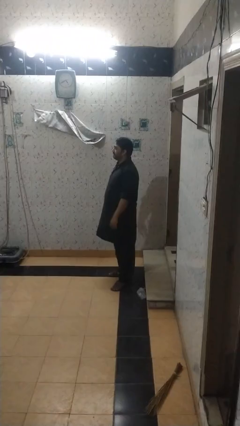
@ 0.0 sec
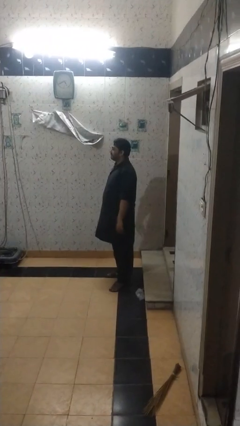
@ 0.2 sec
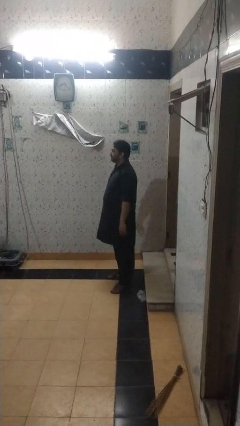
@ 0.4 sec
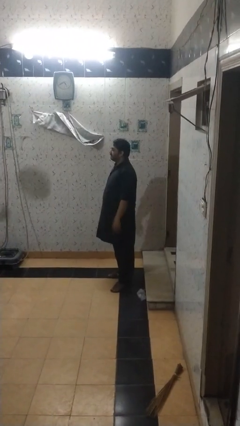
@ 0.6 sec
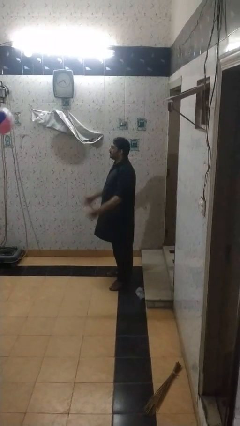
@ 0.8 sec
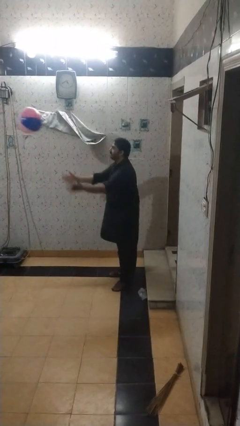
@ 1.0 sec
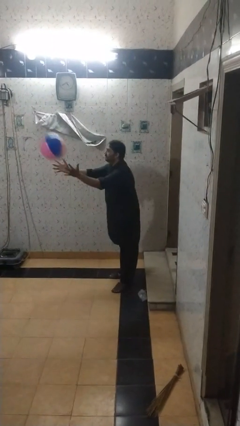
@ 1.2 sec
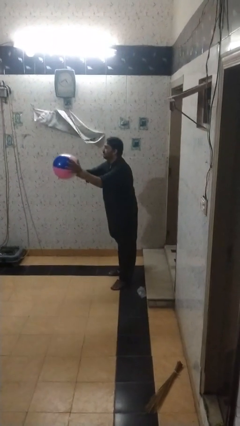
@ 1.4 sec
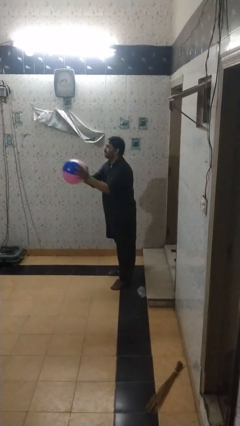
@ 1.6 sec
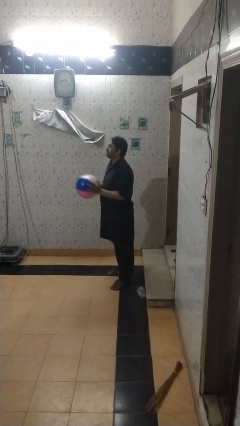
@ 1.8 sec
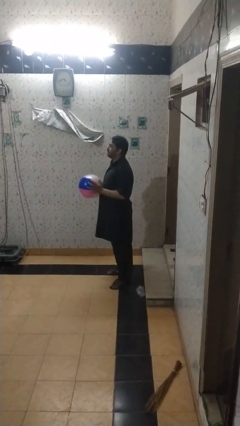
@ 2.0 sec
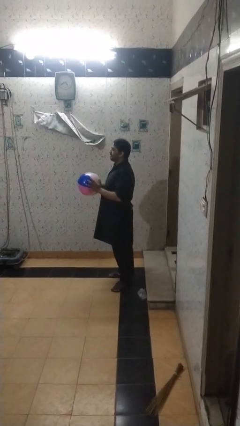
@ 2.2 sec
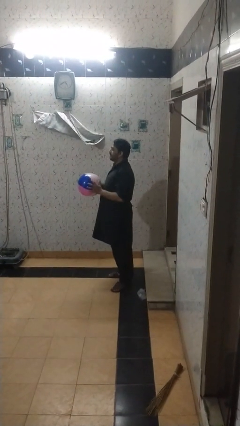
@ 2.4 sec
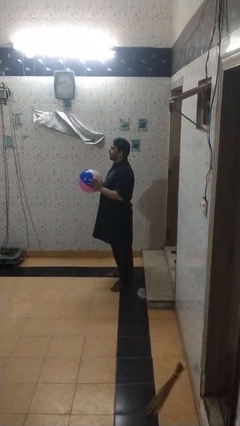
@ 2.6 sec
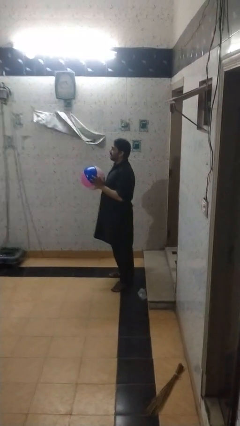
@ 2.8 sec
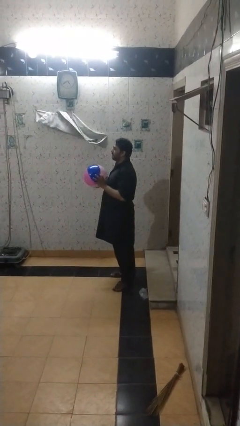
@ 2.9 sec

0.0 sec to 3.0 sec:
person catches object from person

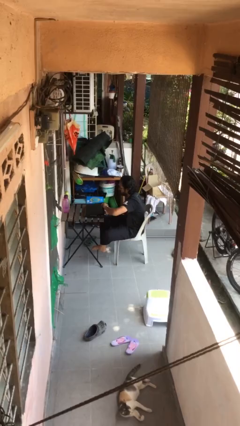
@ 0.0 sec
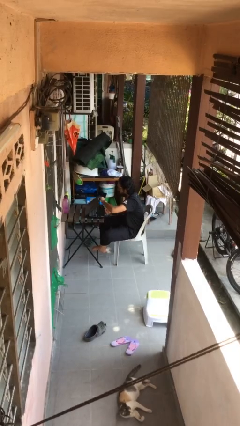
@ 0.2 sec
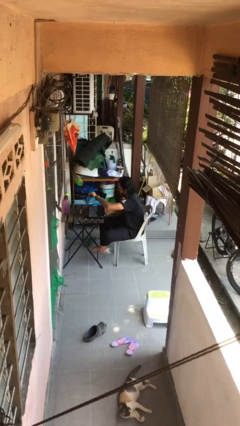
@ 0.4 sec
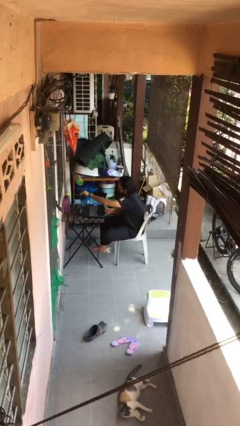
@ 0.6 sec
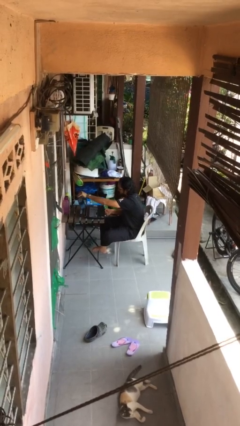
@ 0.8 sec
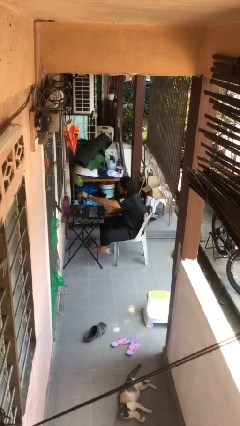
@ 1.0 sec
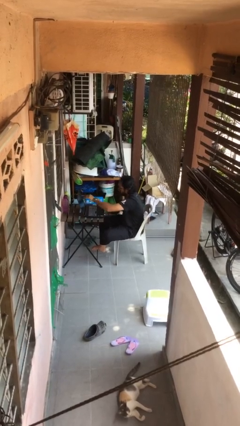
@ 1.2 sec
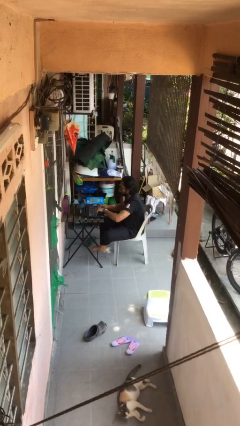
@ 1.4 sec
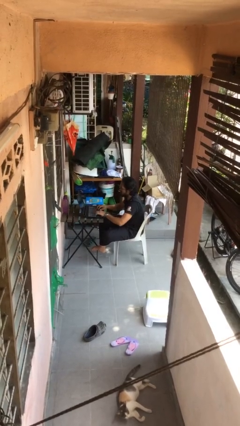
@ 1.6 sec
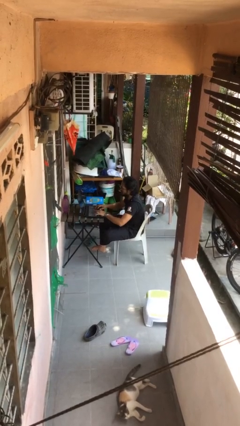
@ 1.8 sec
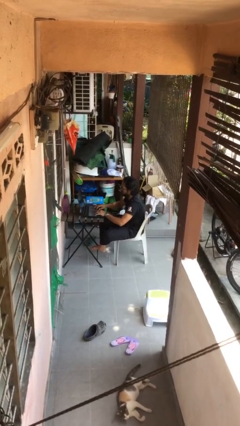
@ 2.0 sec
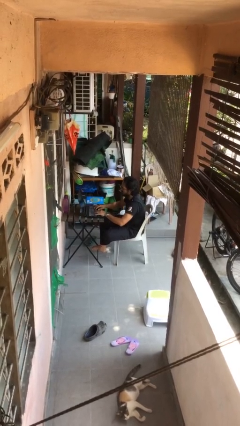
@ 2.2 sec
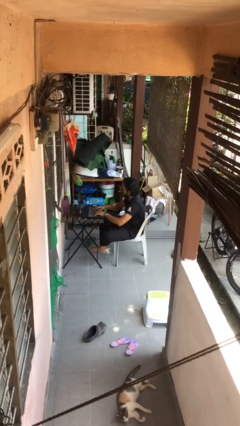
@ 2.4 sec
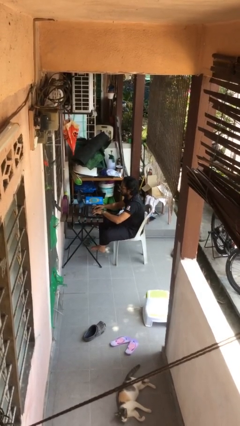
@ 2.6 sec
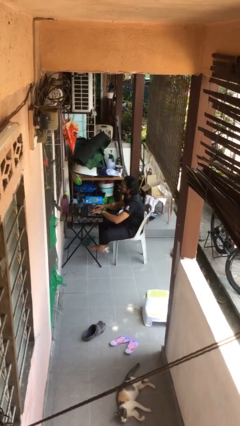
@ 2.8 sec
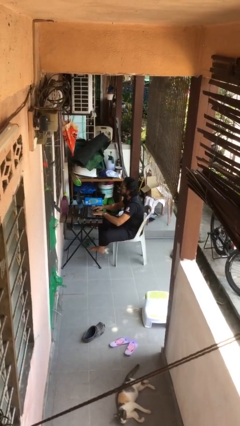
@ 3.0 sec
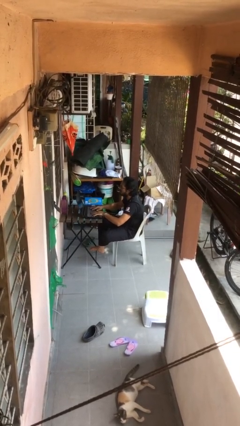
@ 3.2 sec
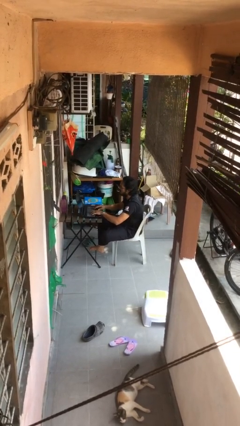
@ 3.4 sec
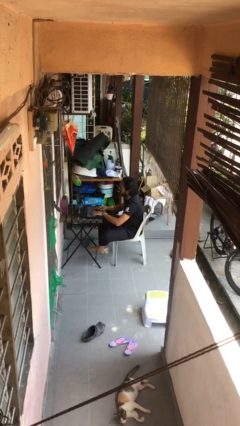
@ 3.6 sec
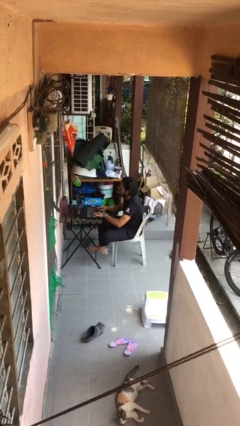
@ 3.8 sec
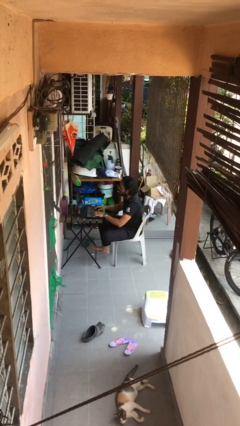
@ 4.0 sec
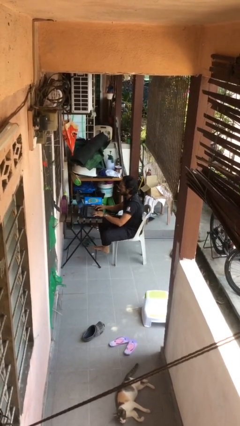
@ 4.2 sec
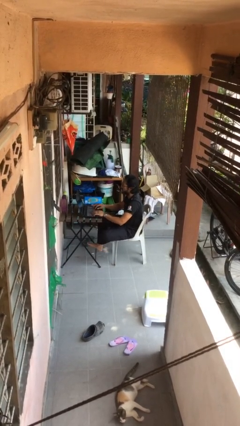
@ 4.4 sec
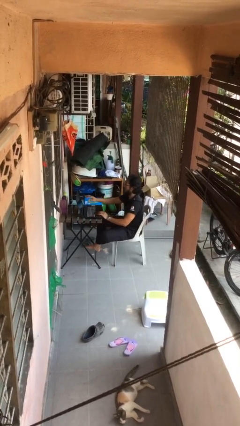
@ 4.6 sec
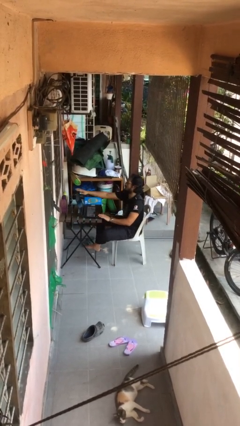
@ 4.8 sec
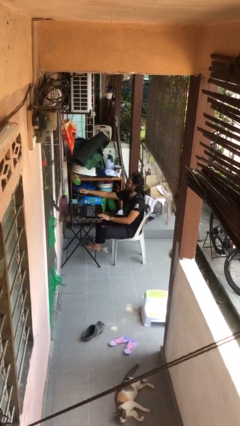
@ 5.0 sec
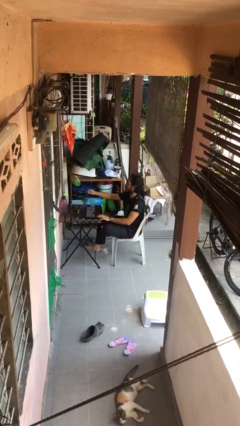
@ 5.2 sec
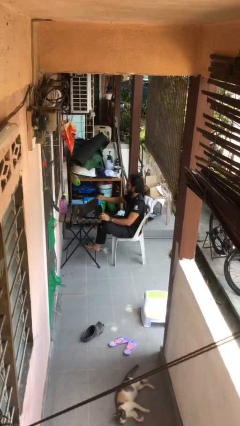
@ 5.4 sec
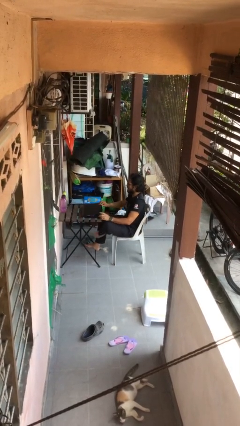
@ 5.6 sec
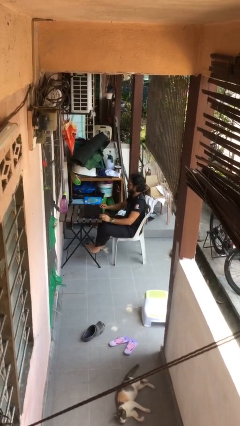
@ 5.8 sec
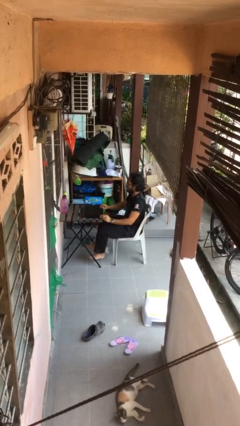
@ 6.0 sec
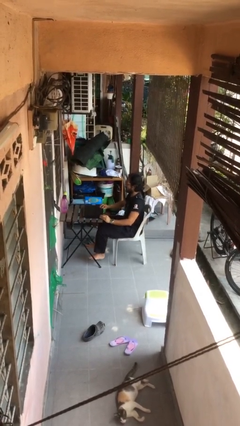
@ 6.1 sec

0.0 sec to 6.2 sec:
person interacts with laptop

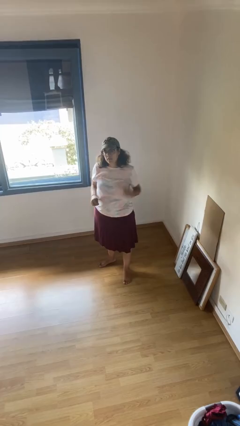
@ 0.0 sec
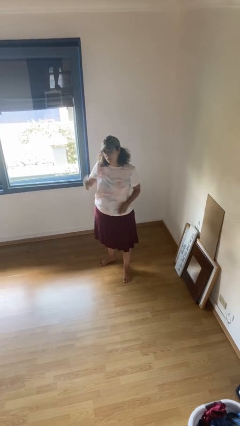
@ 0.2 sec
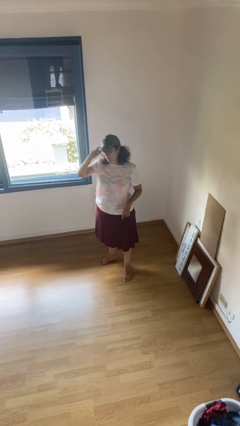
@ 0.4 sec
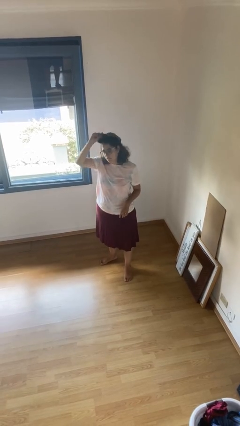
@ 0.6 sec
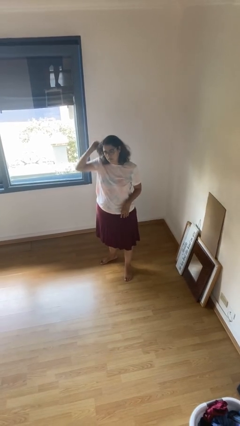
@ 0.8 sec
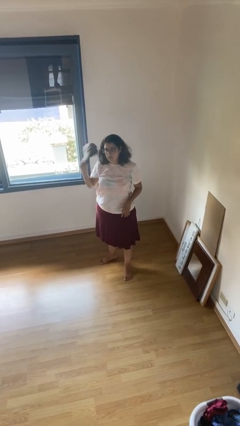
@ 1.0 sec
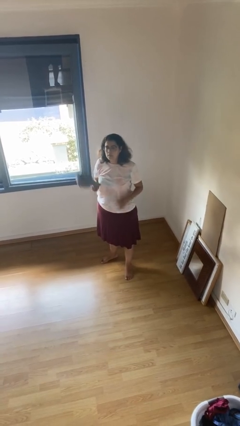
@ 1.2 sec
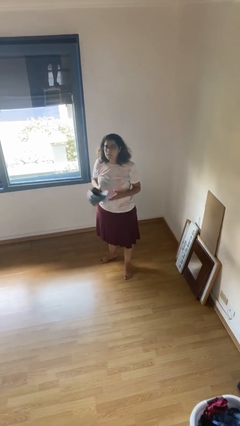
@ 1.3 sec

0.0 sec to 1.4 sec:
person takes off hat

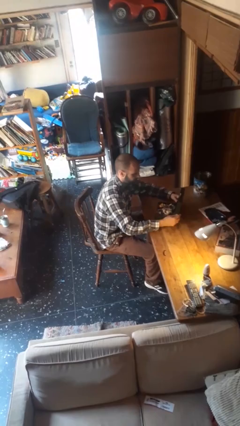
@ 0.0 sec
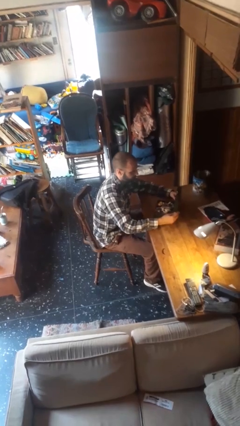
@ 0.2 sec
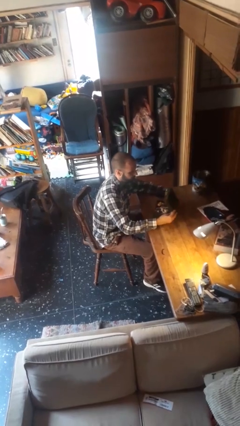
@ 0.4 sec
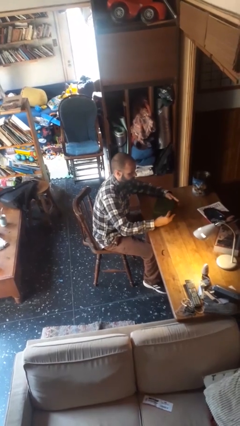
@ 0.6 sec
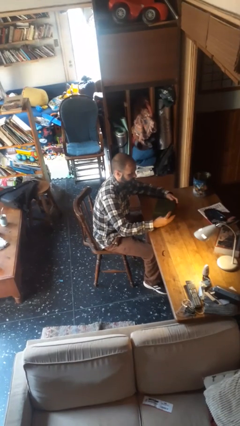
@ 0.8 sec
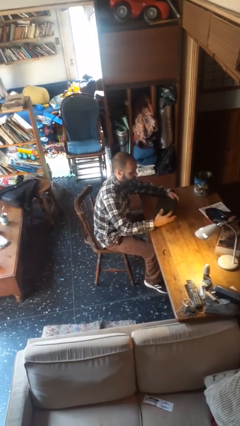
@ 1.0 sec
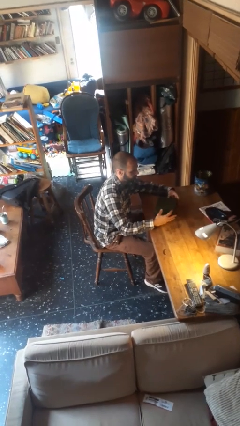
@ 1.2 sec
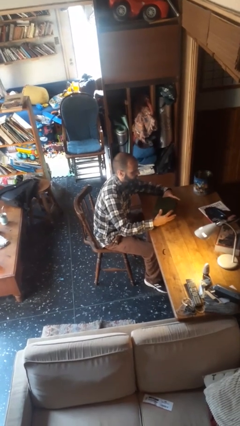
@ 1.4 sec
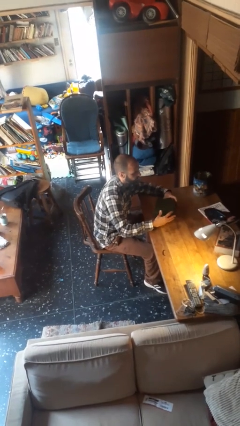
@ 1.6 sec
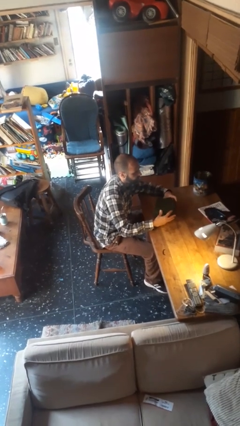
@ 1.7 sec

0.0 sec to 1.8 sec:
person closes jewelry box

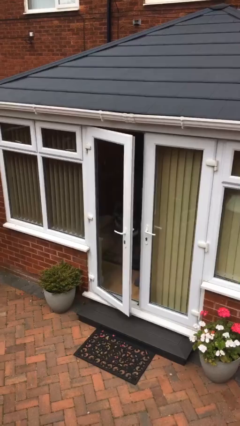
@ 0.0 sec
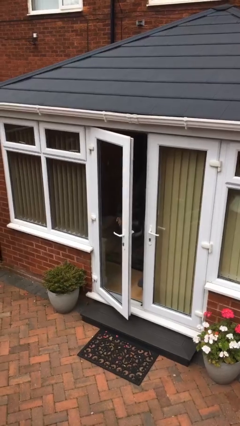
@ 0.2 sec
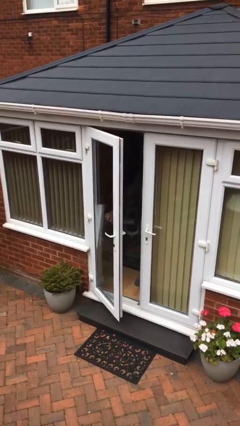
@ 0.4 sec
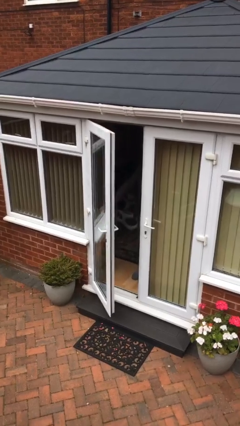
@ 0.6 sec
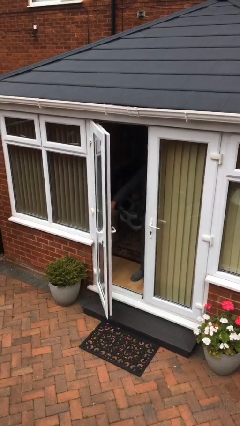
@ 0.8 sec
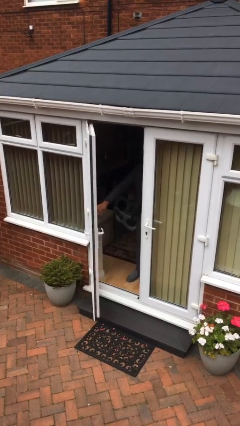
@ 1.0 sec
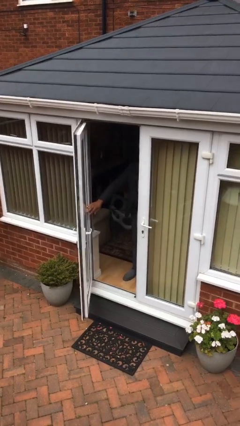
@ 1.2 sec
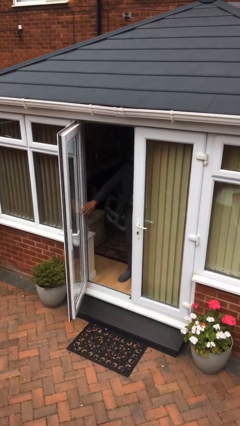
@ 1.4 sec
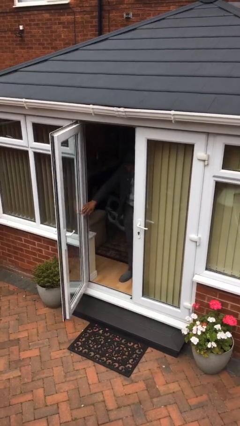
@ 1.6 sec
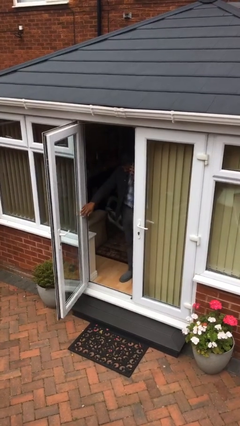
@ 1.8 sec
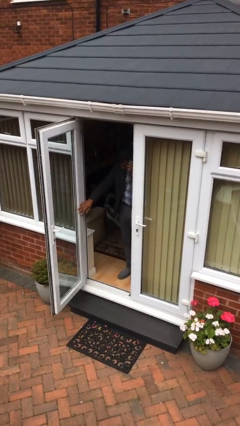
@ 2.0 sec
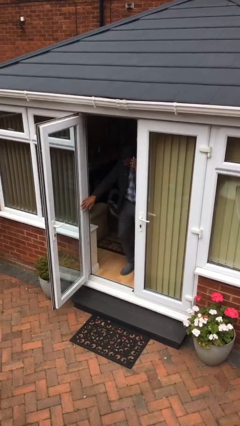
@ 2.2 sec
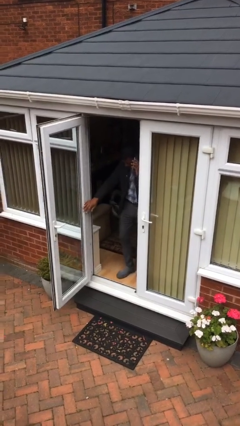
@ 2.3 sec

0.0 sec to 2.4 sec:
person opens facility door

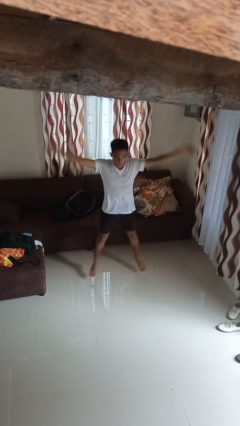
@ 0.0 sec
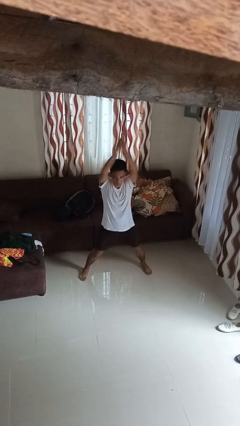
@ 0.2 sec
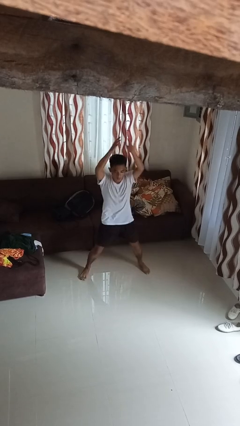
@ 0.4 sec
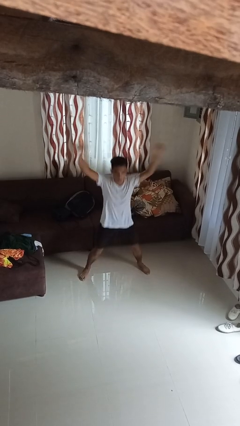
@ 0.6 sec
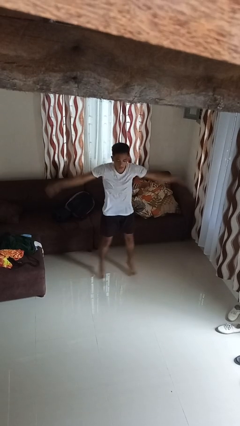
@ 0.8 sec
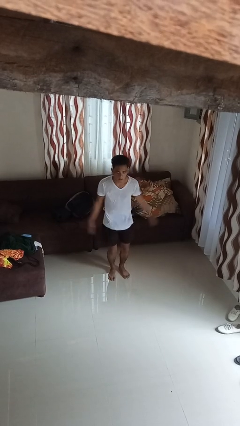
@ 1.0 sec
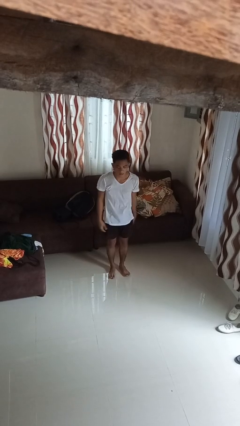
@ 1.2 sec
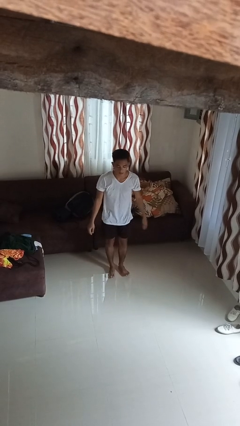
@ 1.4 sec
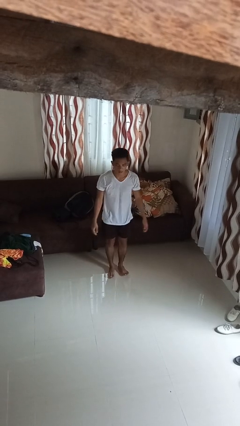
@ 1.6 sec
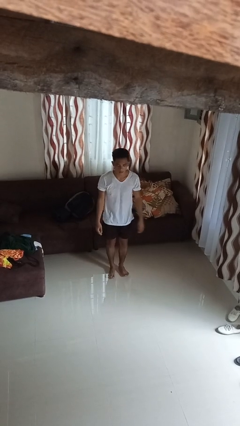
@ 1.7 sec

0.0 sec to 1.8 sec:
person exercises with jumping jacks

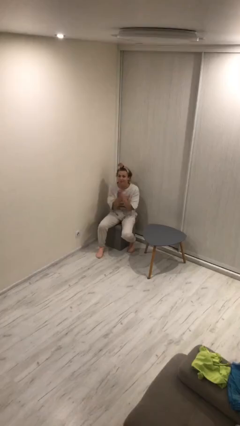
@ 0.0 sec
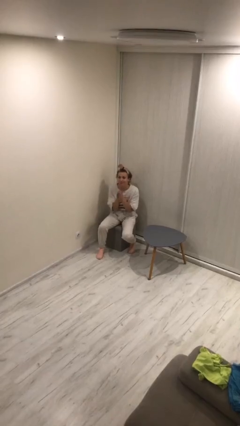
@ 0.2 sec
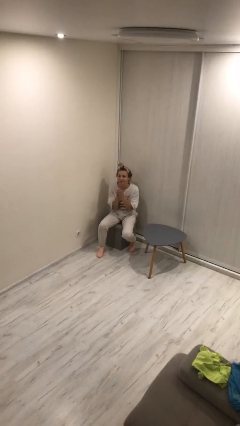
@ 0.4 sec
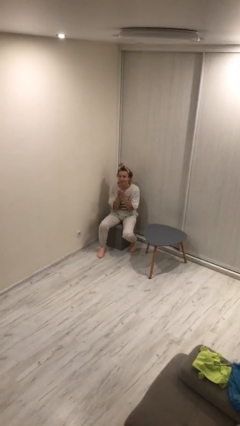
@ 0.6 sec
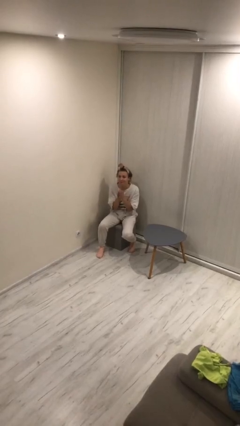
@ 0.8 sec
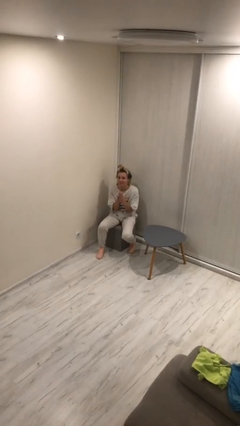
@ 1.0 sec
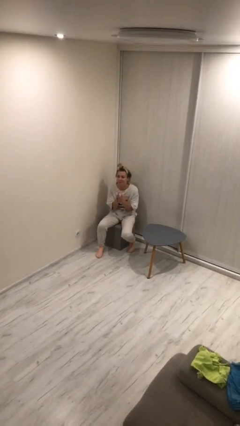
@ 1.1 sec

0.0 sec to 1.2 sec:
person claps hands
